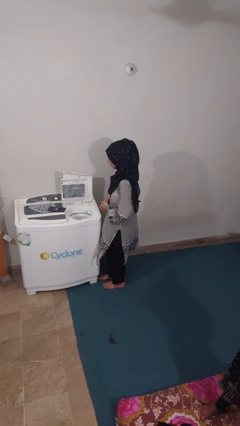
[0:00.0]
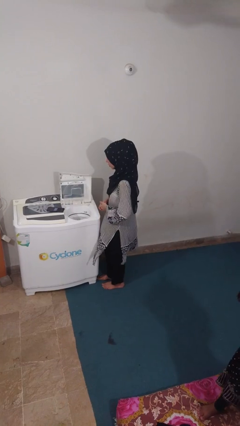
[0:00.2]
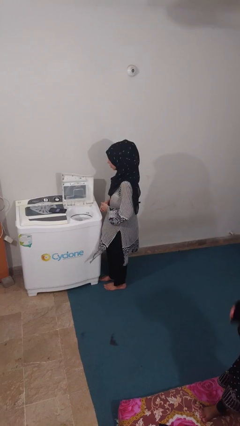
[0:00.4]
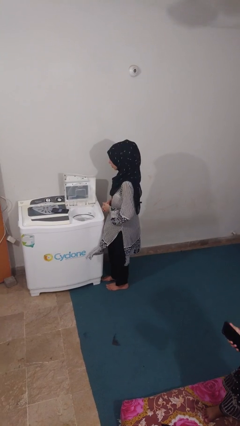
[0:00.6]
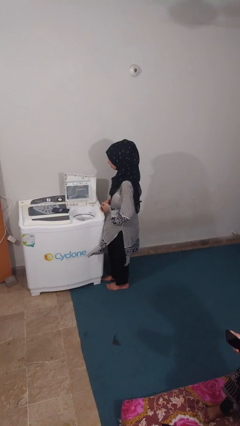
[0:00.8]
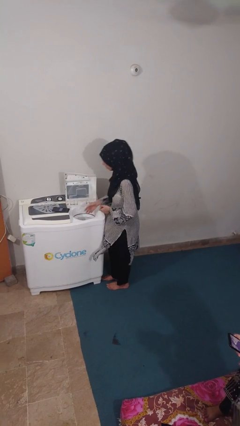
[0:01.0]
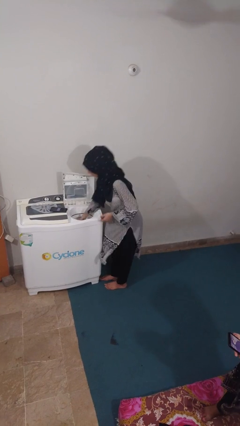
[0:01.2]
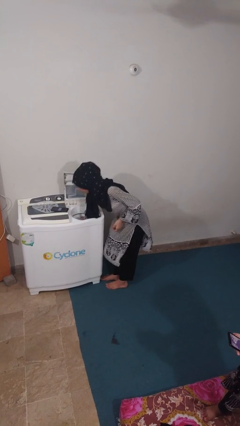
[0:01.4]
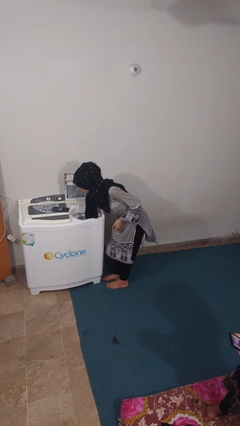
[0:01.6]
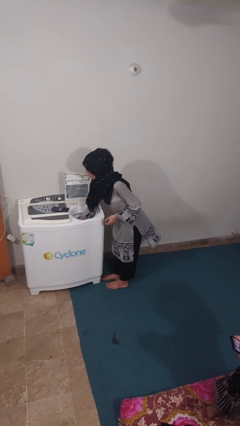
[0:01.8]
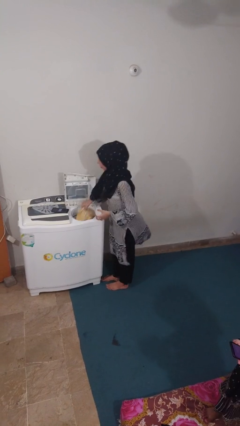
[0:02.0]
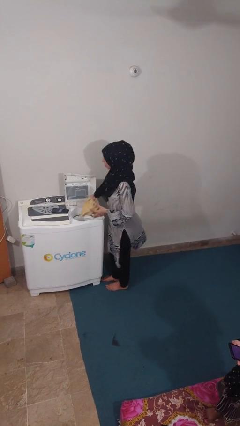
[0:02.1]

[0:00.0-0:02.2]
person unloads dryer

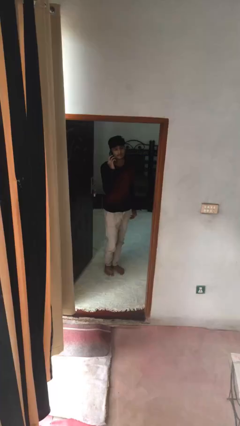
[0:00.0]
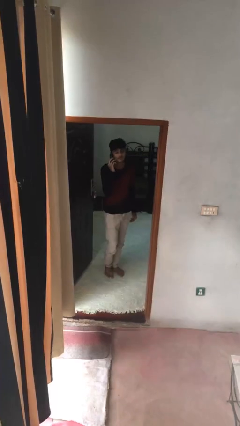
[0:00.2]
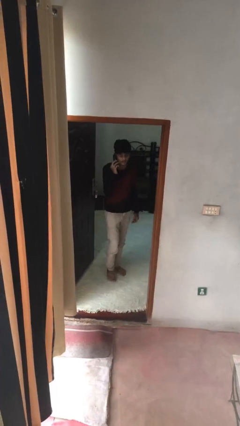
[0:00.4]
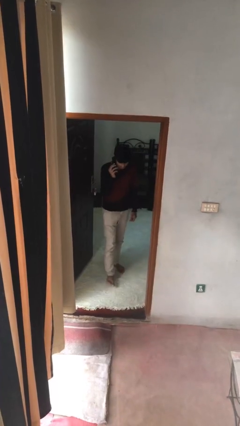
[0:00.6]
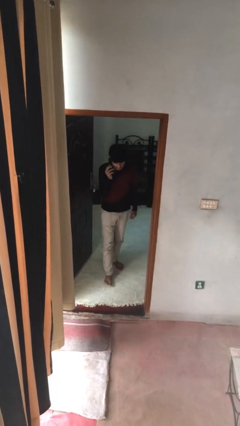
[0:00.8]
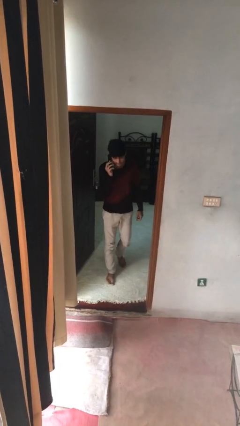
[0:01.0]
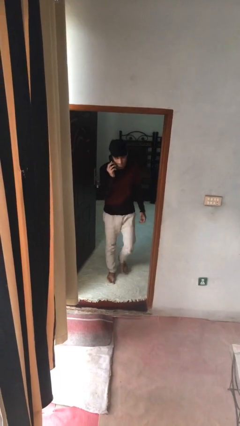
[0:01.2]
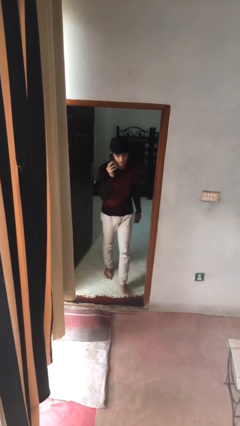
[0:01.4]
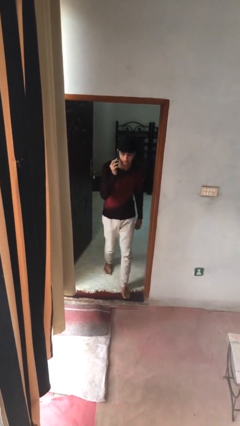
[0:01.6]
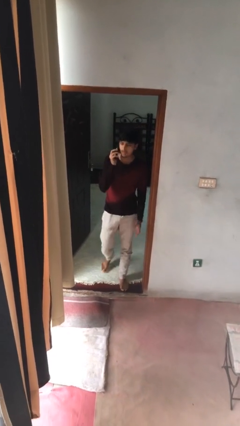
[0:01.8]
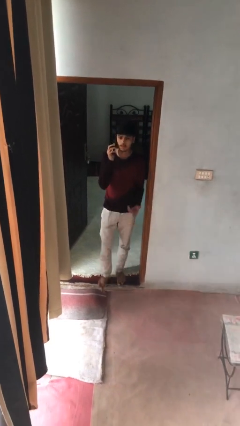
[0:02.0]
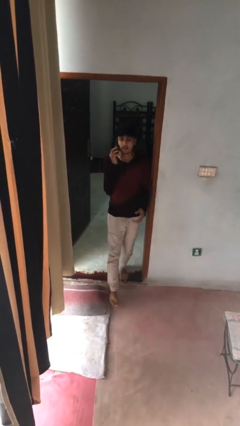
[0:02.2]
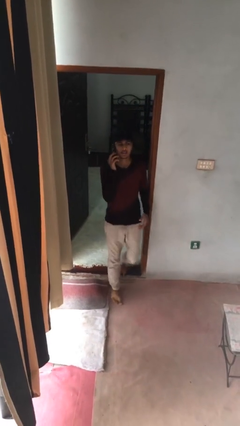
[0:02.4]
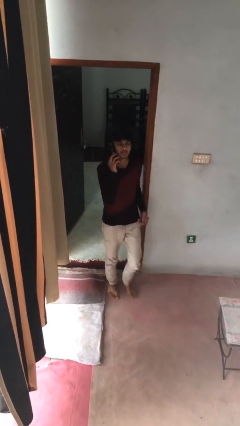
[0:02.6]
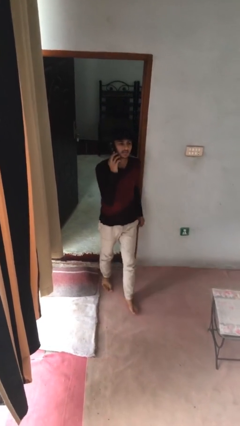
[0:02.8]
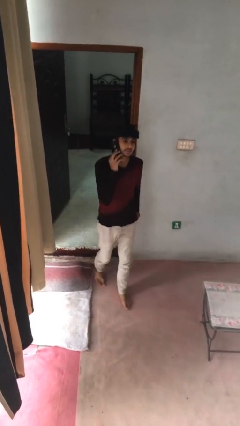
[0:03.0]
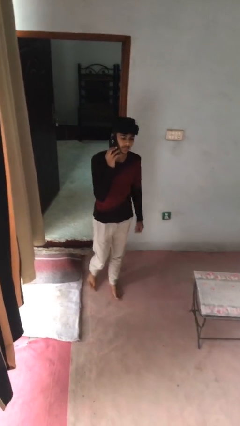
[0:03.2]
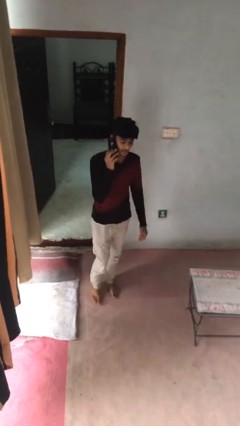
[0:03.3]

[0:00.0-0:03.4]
person enters scene through structure

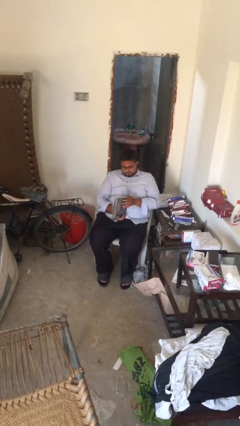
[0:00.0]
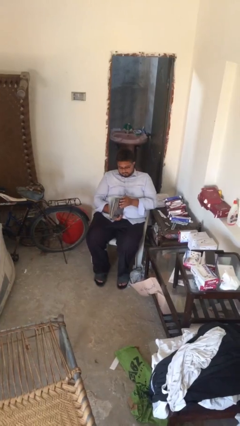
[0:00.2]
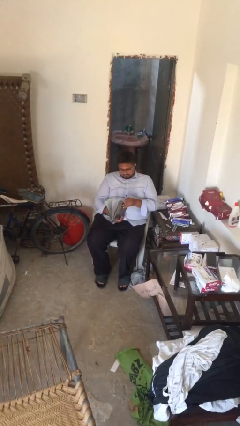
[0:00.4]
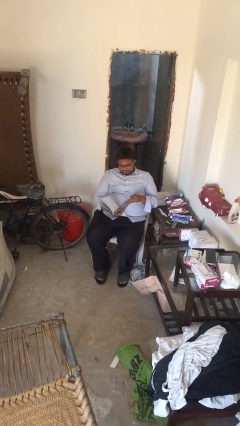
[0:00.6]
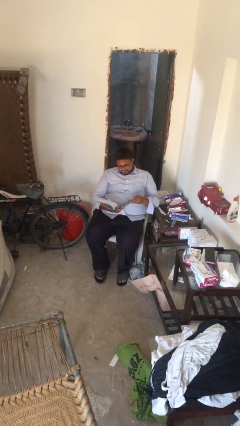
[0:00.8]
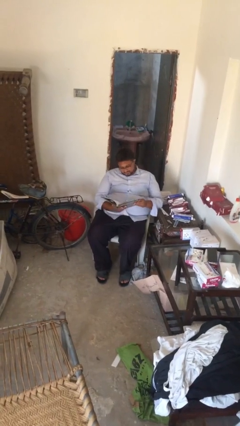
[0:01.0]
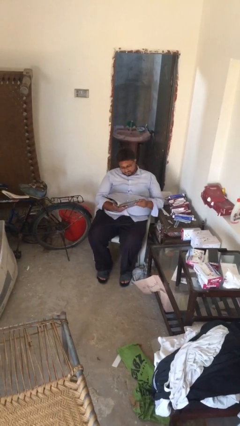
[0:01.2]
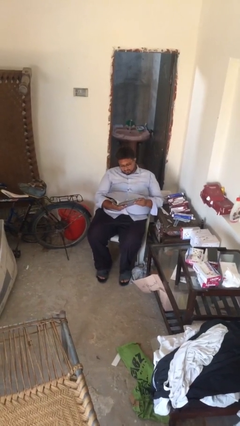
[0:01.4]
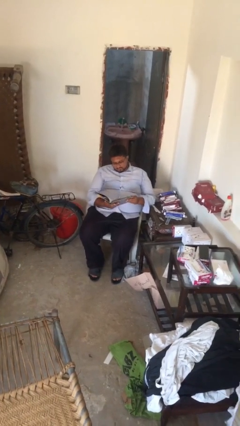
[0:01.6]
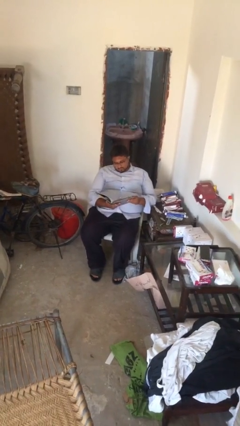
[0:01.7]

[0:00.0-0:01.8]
person reads document

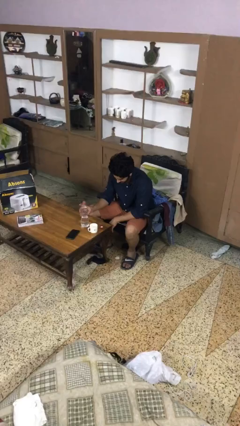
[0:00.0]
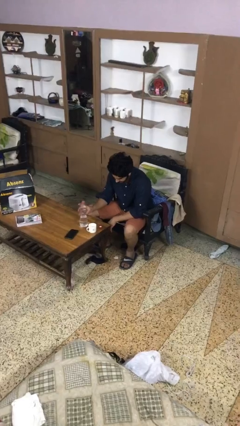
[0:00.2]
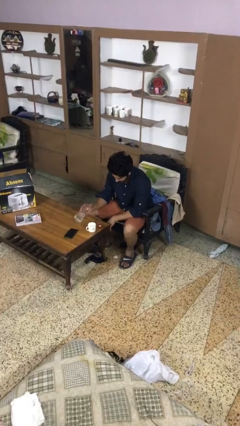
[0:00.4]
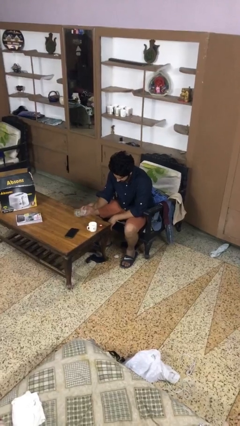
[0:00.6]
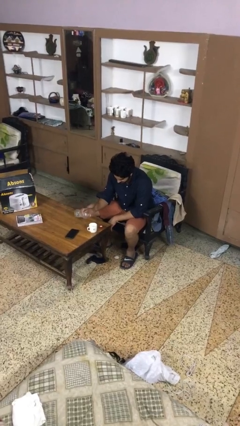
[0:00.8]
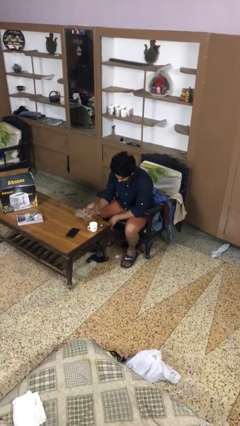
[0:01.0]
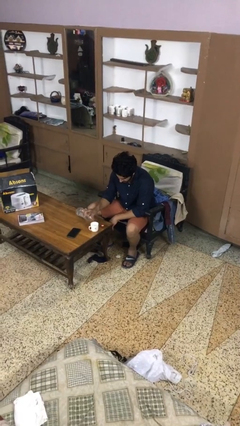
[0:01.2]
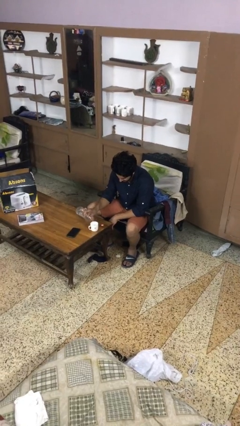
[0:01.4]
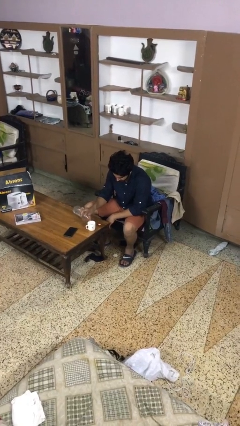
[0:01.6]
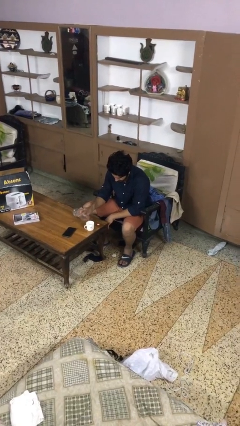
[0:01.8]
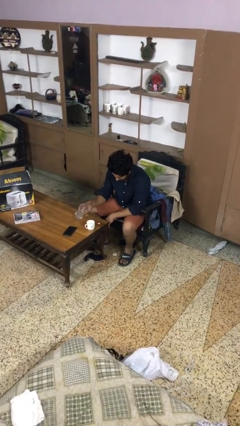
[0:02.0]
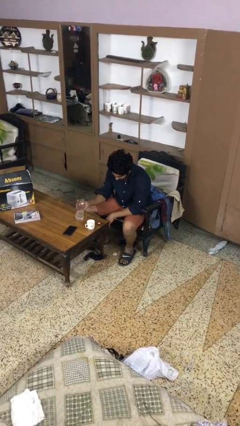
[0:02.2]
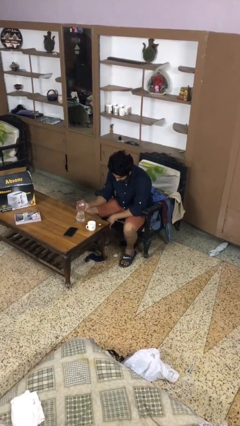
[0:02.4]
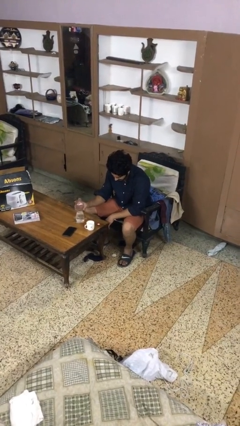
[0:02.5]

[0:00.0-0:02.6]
person pours liquid into cup

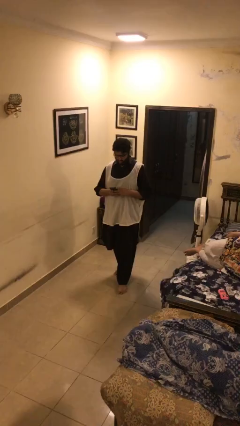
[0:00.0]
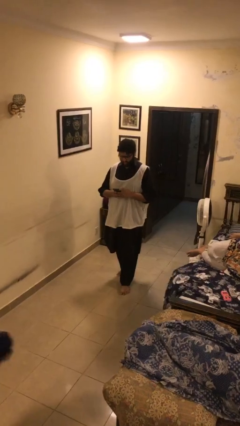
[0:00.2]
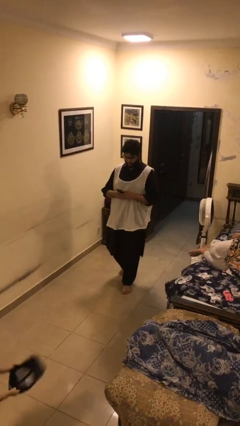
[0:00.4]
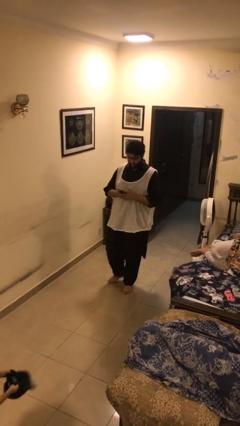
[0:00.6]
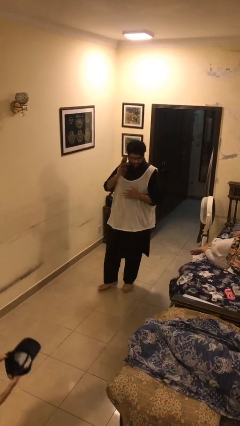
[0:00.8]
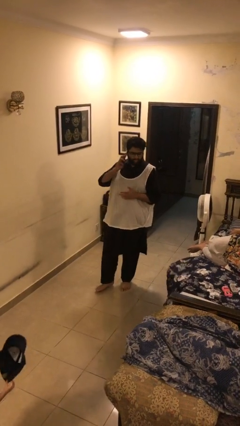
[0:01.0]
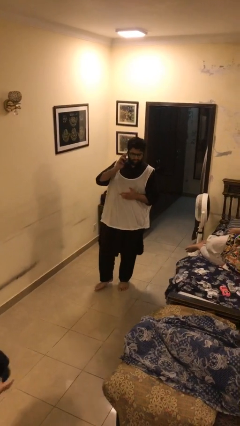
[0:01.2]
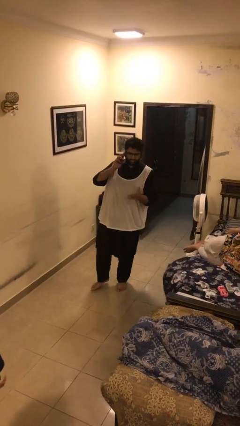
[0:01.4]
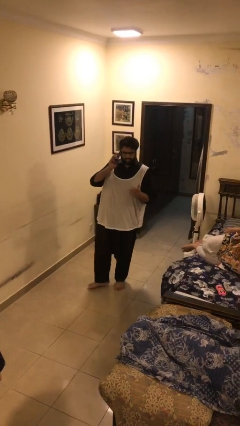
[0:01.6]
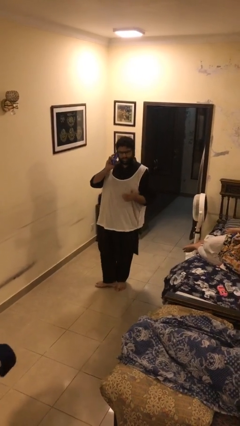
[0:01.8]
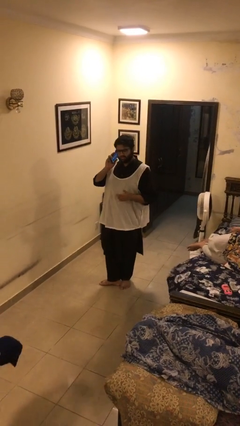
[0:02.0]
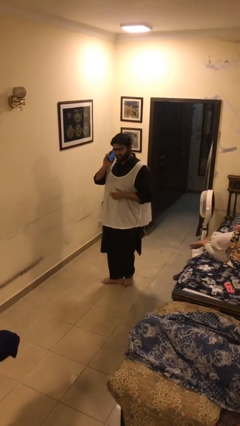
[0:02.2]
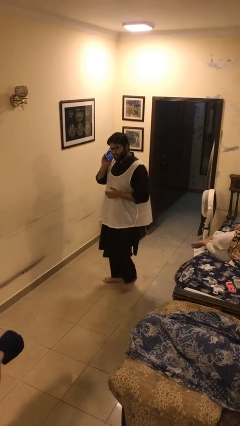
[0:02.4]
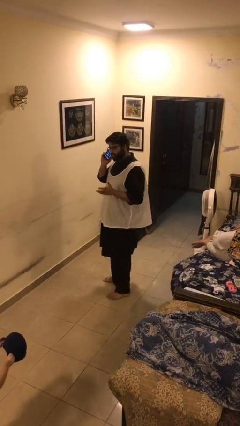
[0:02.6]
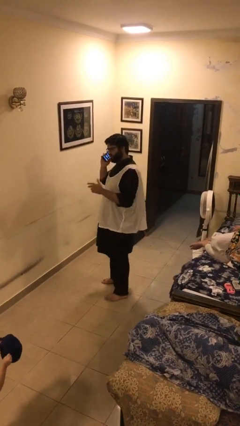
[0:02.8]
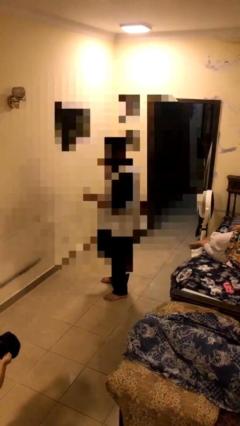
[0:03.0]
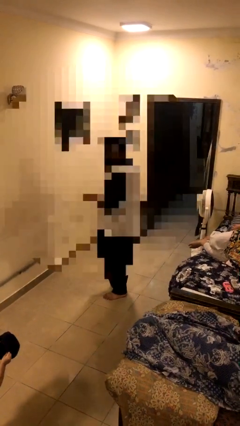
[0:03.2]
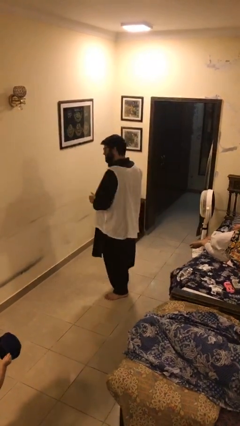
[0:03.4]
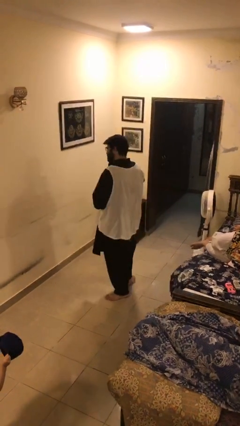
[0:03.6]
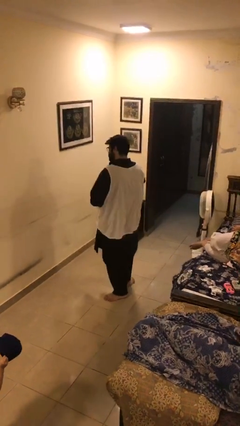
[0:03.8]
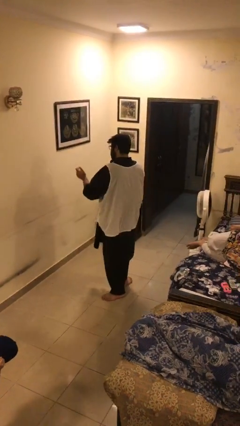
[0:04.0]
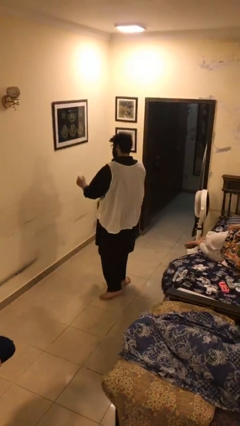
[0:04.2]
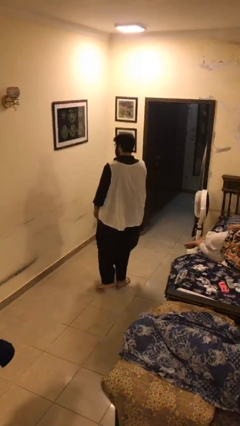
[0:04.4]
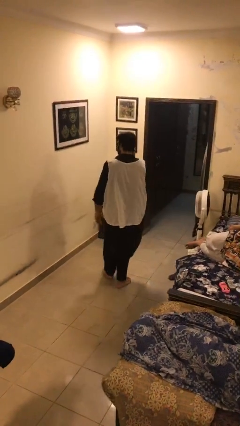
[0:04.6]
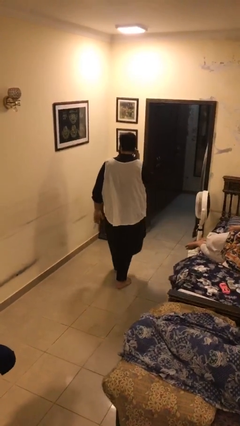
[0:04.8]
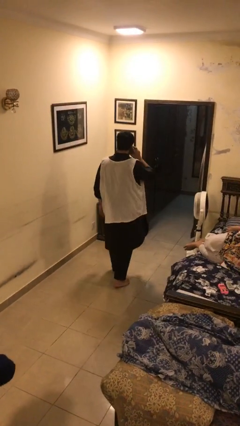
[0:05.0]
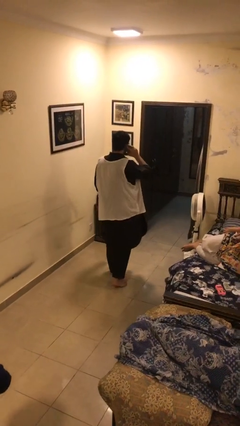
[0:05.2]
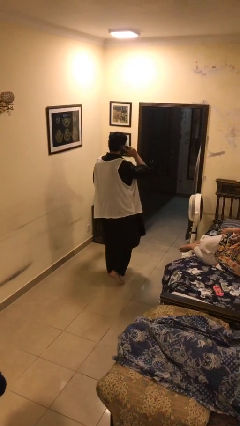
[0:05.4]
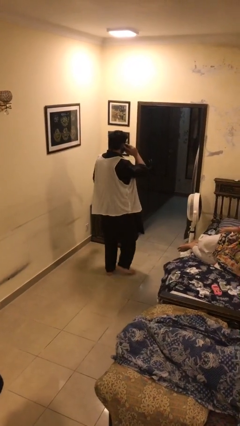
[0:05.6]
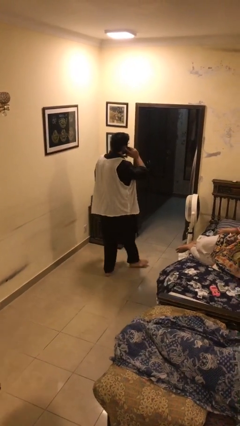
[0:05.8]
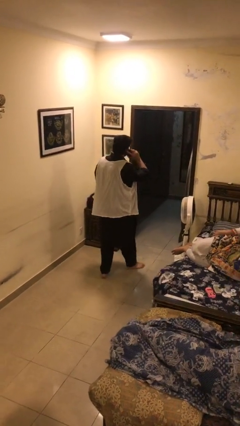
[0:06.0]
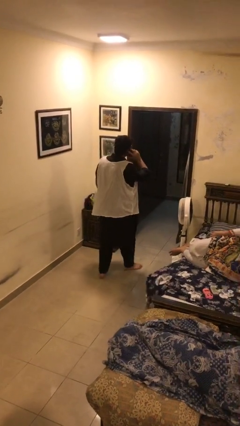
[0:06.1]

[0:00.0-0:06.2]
person talks on phone

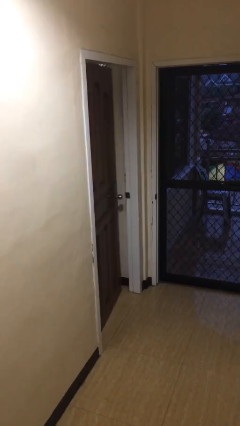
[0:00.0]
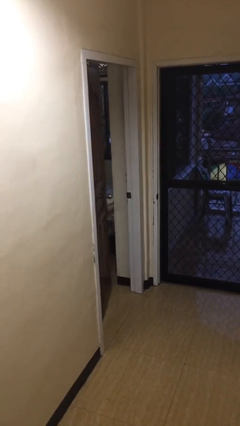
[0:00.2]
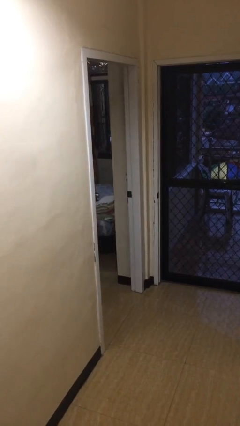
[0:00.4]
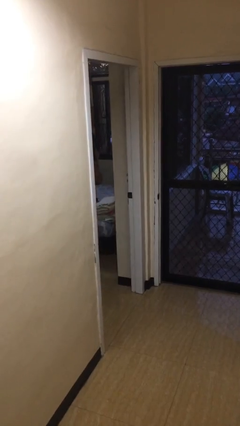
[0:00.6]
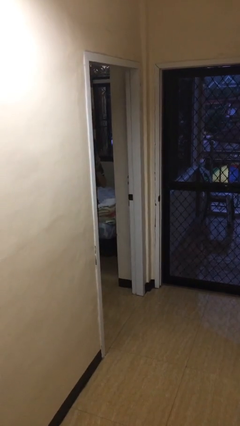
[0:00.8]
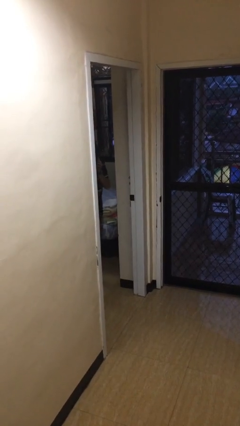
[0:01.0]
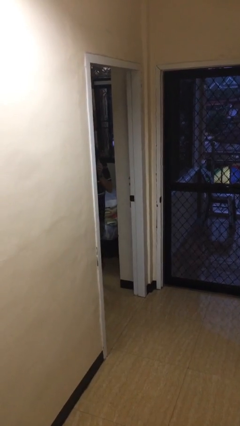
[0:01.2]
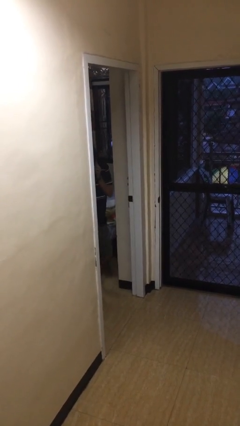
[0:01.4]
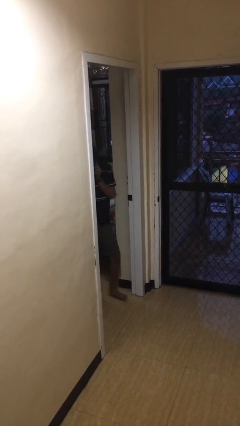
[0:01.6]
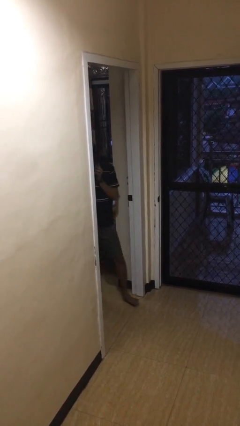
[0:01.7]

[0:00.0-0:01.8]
person opens facility door
